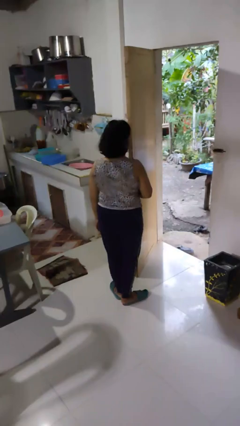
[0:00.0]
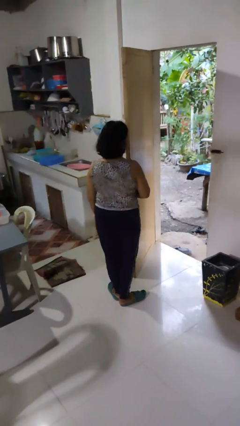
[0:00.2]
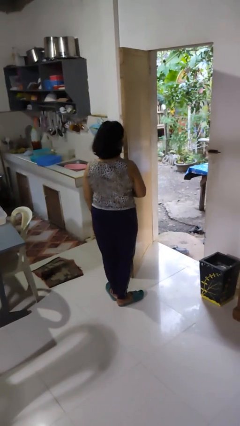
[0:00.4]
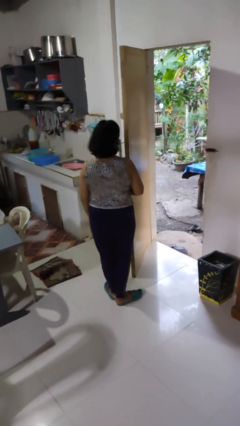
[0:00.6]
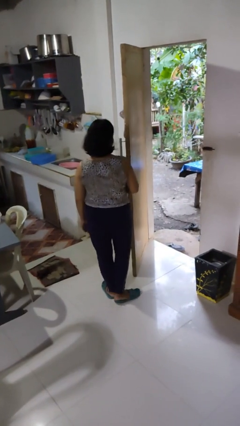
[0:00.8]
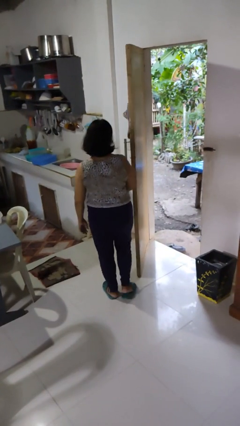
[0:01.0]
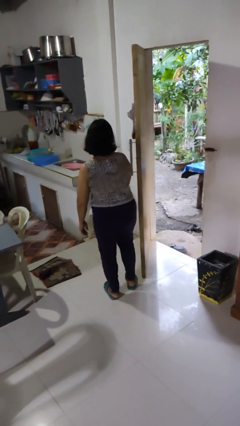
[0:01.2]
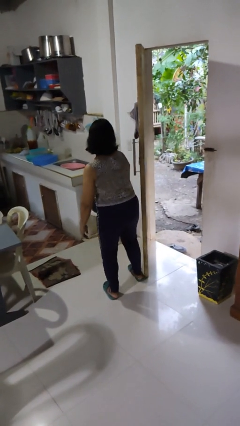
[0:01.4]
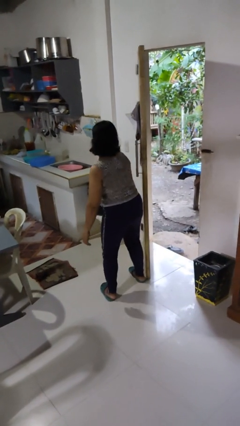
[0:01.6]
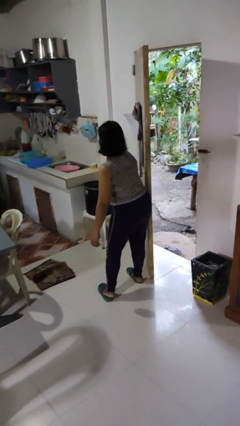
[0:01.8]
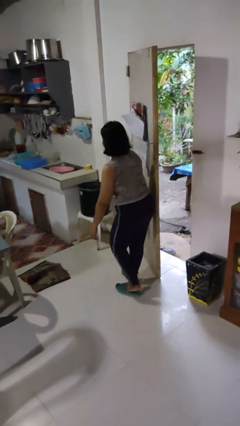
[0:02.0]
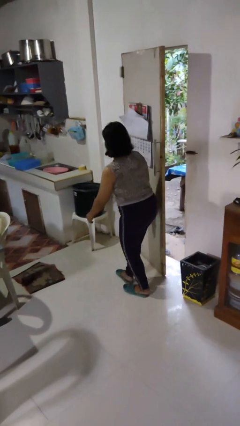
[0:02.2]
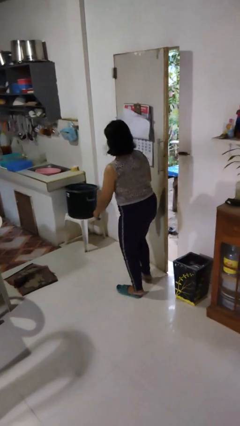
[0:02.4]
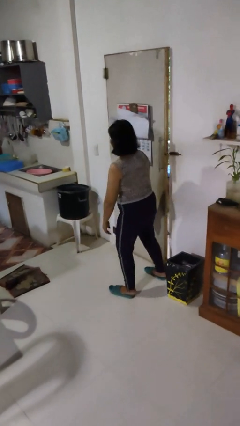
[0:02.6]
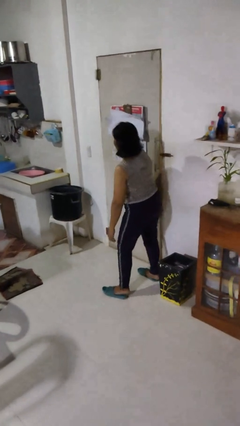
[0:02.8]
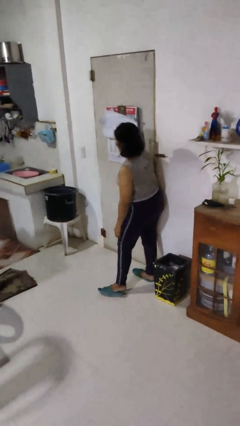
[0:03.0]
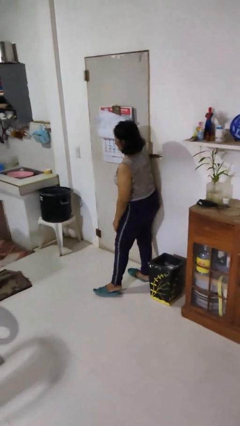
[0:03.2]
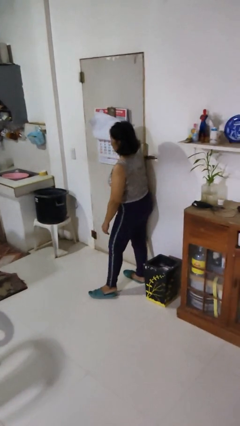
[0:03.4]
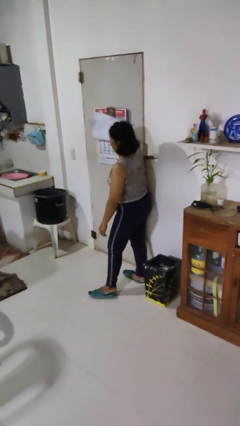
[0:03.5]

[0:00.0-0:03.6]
person closes door with hip

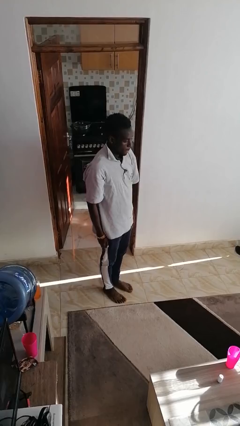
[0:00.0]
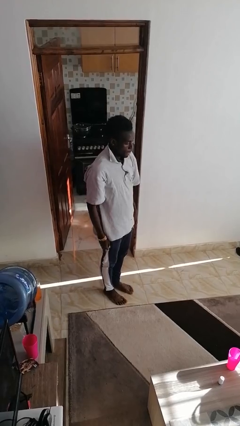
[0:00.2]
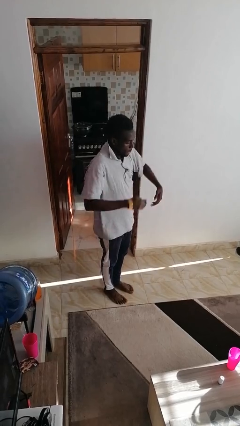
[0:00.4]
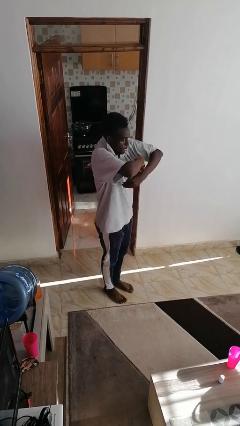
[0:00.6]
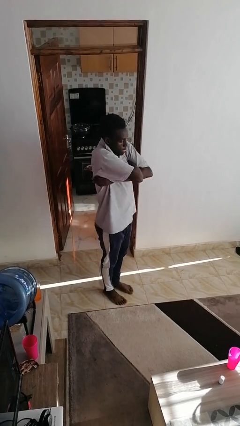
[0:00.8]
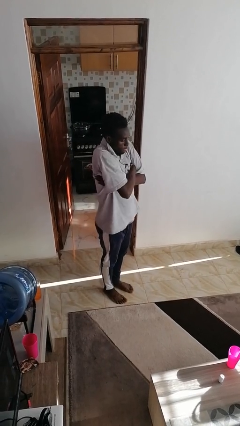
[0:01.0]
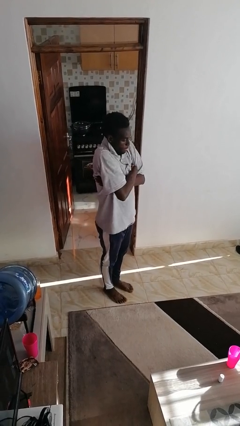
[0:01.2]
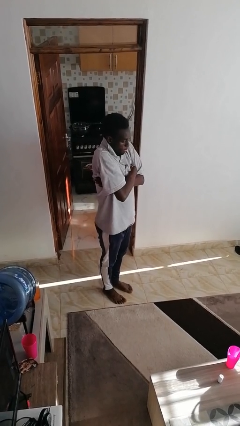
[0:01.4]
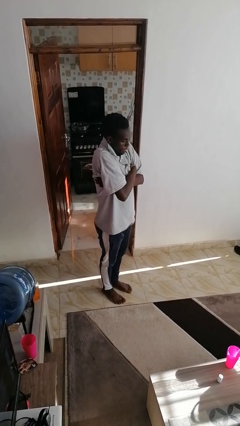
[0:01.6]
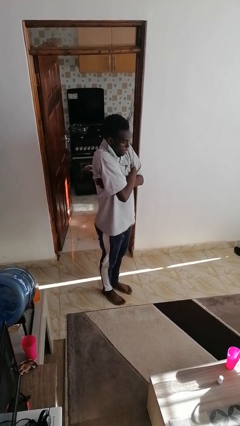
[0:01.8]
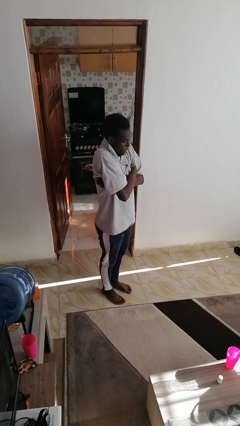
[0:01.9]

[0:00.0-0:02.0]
person crosses arms

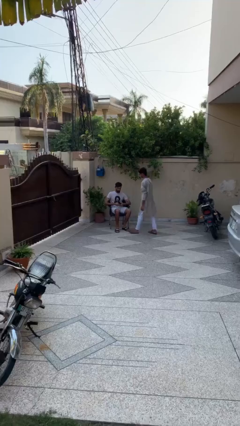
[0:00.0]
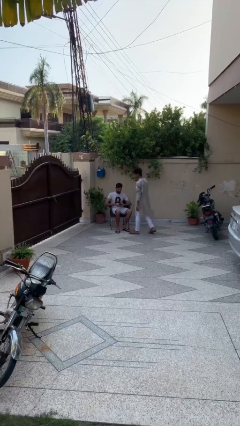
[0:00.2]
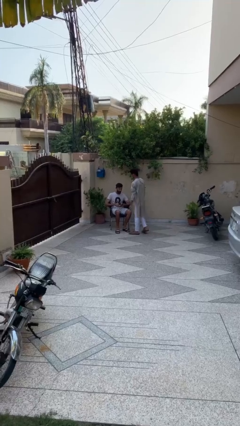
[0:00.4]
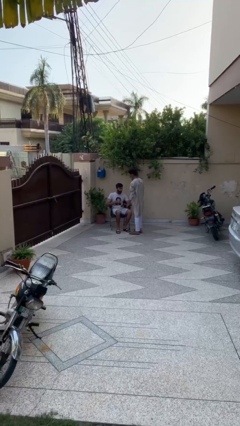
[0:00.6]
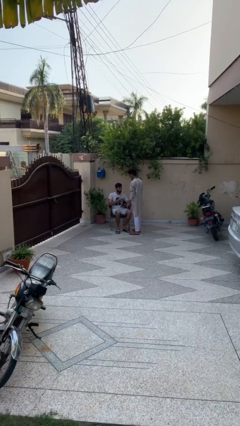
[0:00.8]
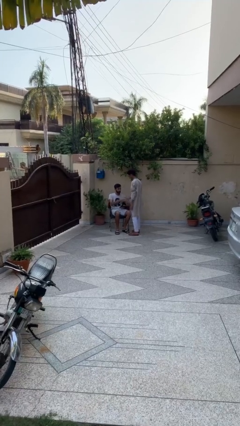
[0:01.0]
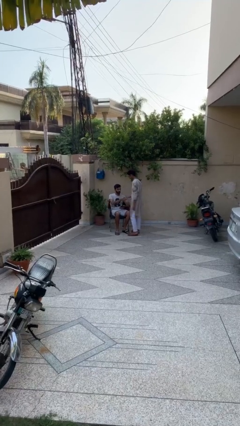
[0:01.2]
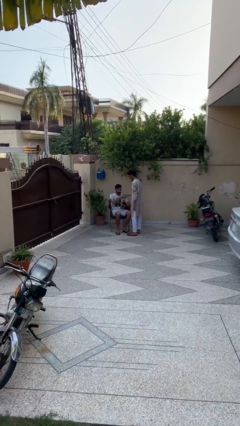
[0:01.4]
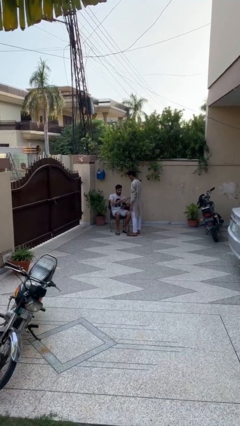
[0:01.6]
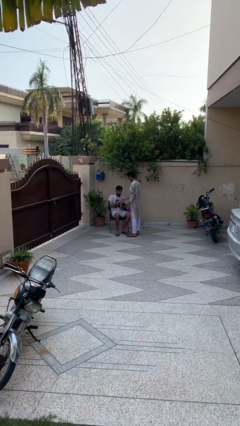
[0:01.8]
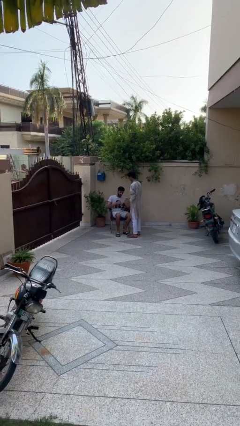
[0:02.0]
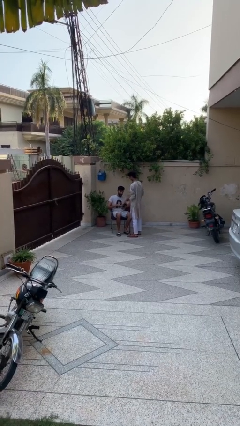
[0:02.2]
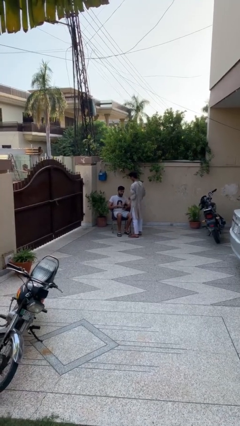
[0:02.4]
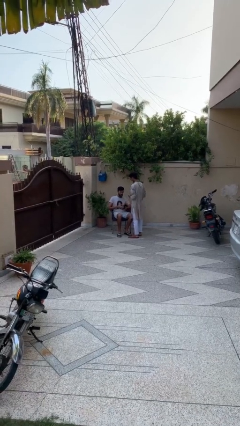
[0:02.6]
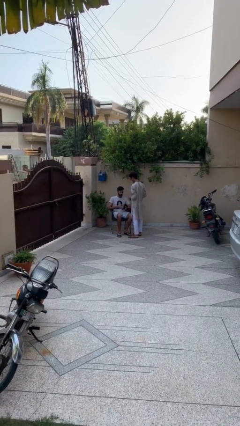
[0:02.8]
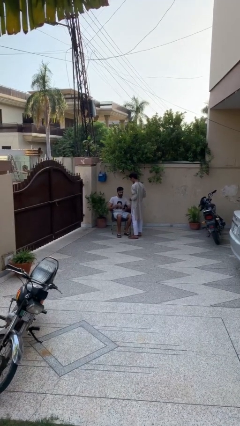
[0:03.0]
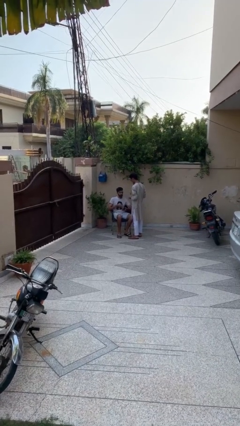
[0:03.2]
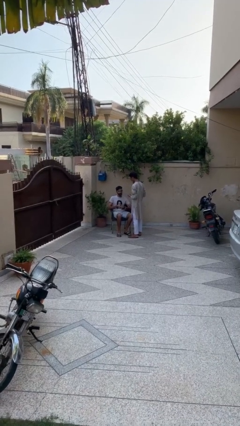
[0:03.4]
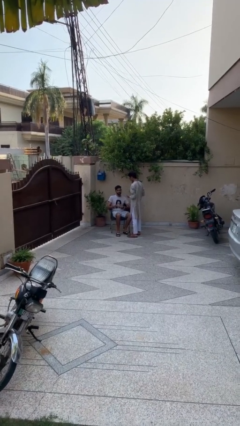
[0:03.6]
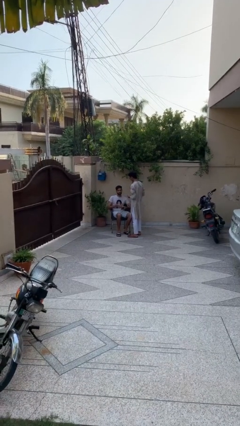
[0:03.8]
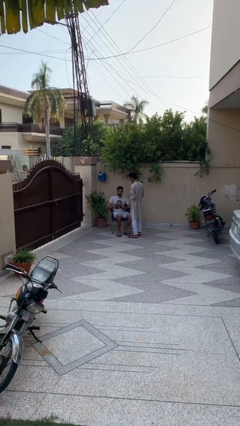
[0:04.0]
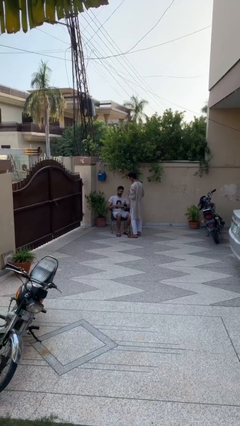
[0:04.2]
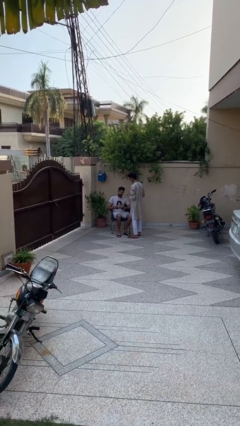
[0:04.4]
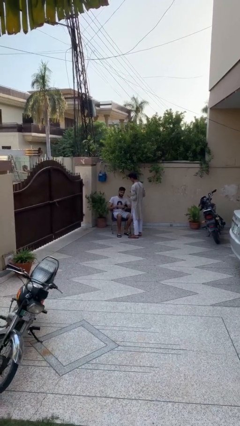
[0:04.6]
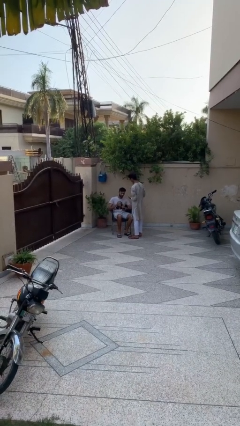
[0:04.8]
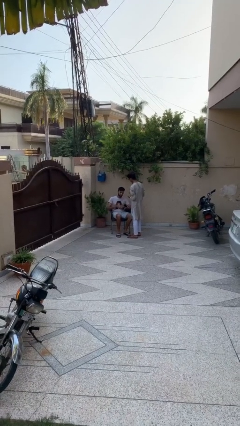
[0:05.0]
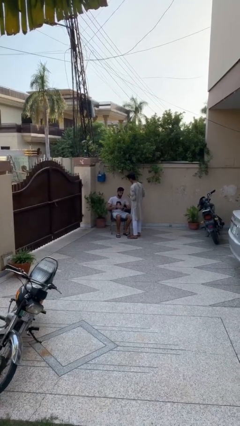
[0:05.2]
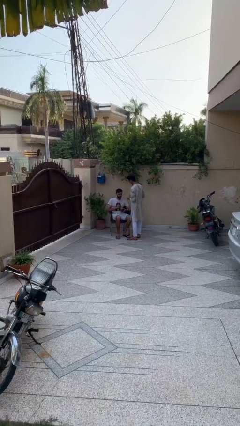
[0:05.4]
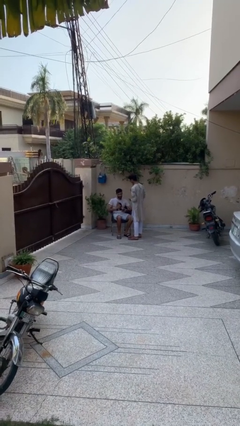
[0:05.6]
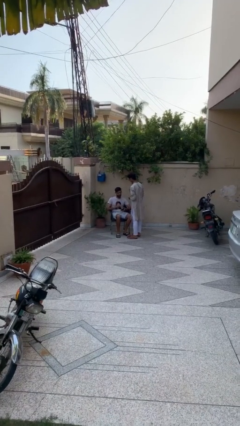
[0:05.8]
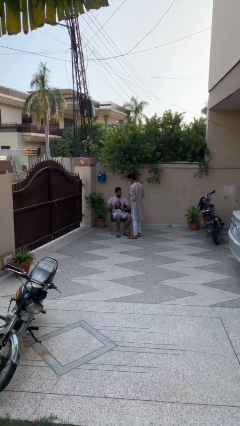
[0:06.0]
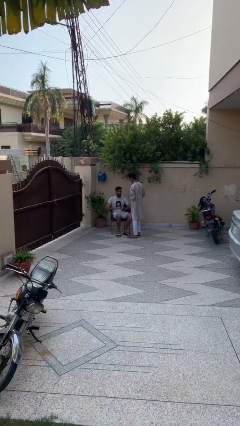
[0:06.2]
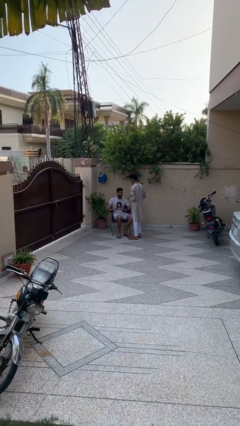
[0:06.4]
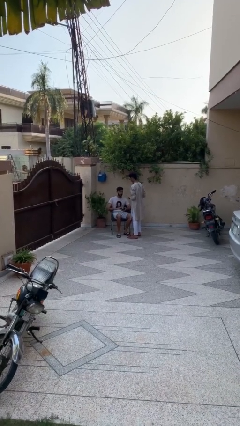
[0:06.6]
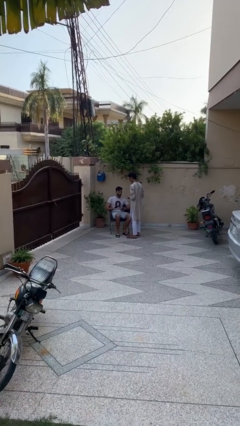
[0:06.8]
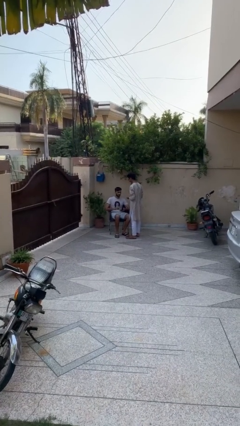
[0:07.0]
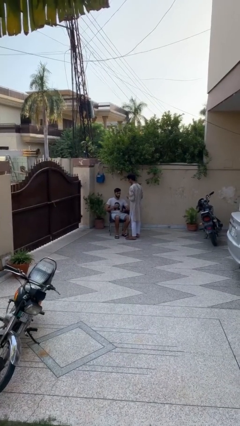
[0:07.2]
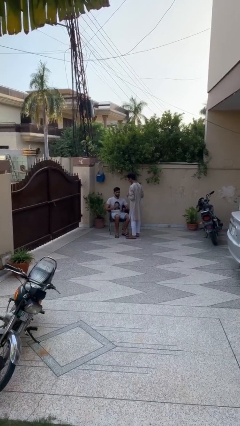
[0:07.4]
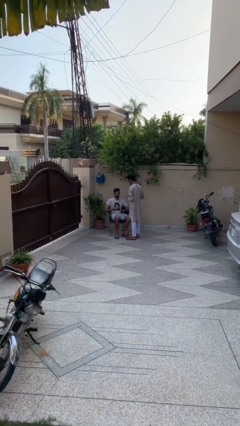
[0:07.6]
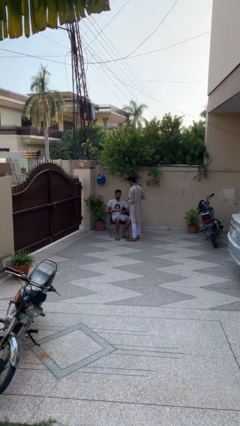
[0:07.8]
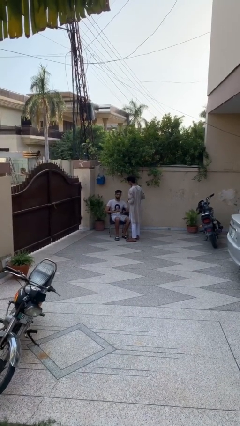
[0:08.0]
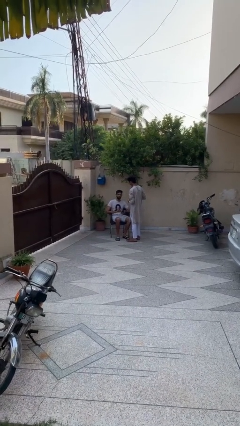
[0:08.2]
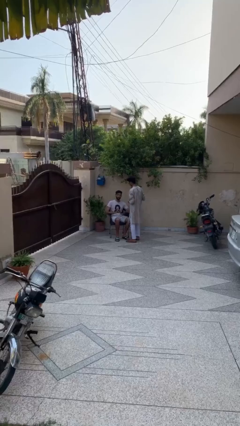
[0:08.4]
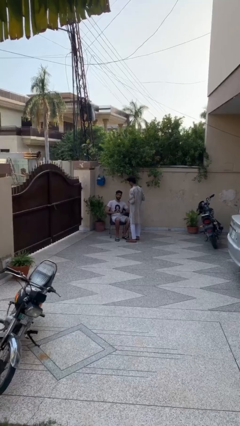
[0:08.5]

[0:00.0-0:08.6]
person shakes hand

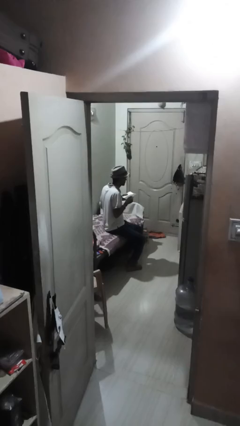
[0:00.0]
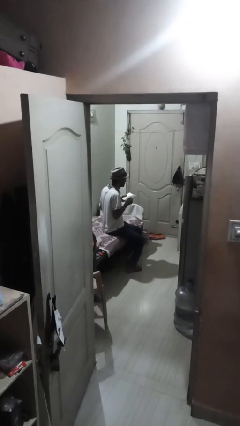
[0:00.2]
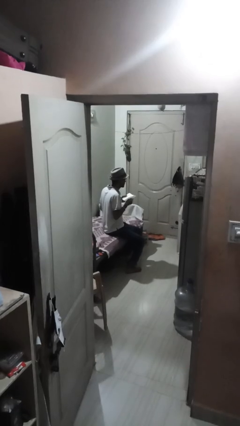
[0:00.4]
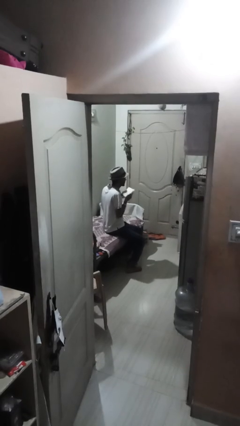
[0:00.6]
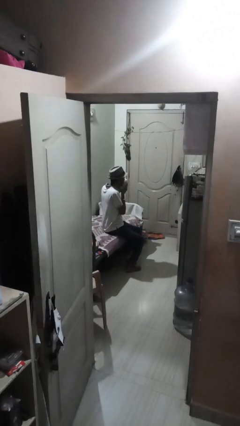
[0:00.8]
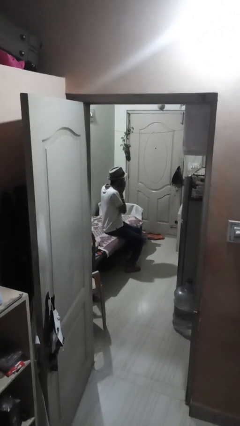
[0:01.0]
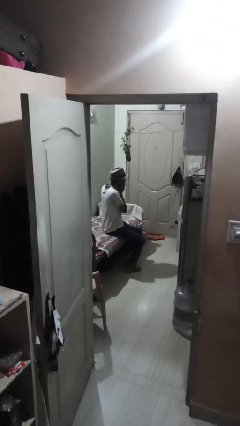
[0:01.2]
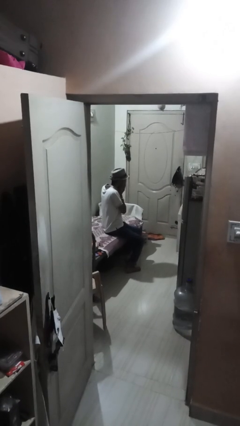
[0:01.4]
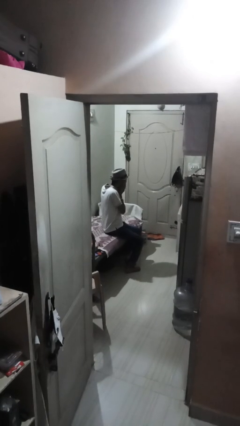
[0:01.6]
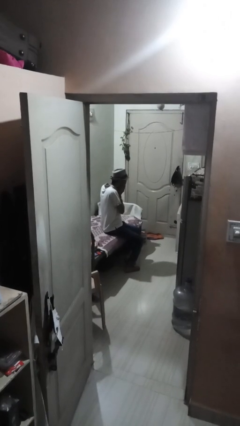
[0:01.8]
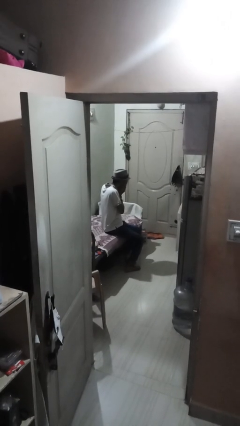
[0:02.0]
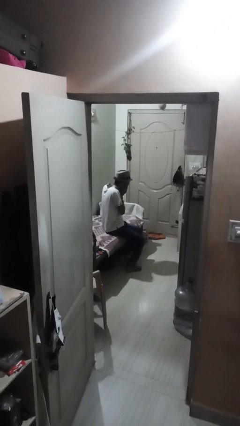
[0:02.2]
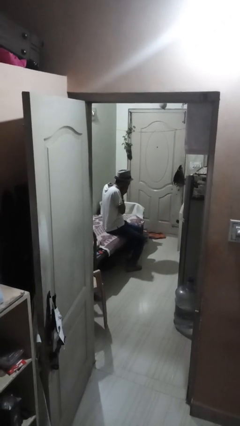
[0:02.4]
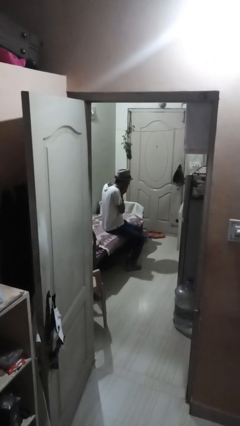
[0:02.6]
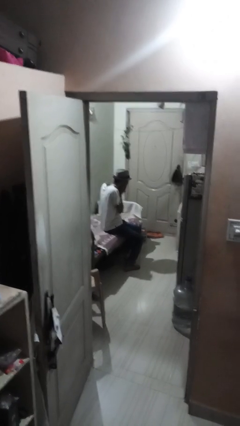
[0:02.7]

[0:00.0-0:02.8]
person blows nose

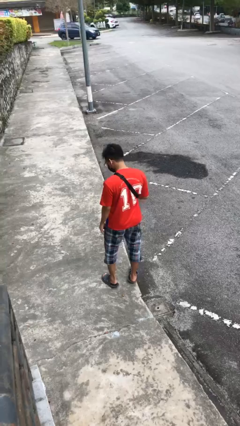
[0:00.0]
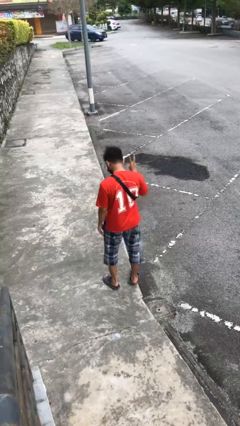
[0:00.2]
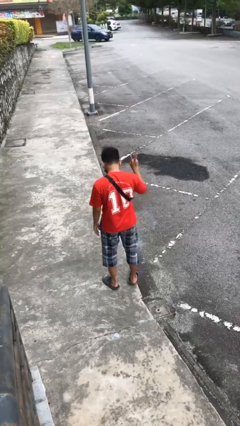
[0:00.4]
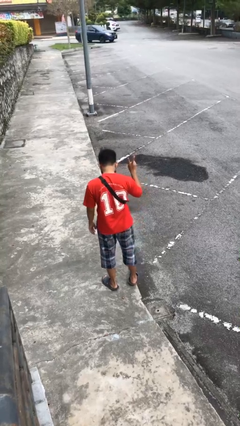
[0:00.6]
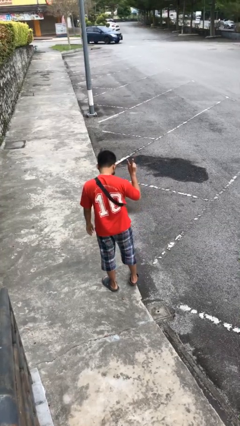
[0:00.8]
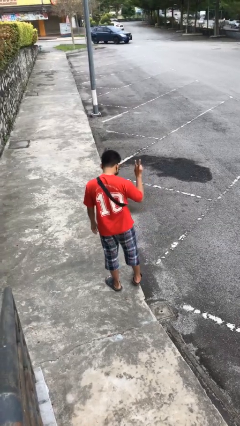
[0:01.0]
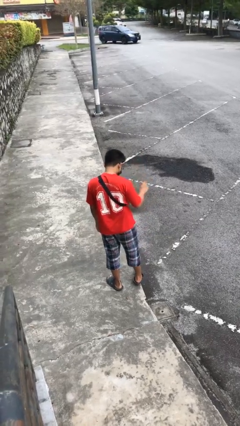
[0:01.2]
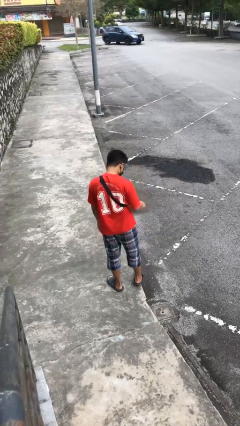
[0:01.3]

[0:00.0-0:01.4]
person gestures peace
